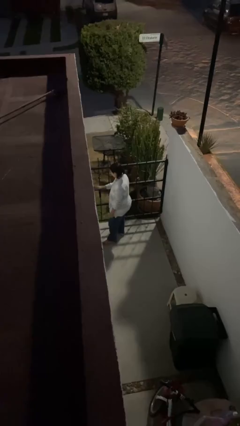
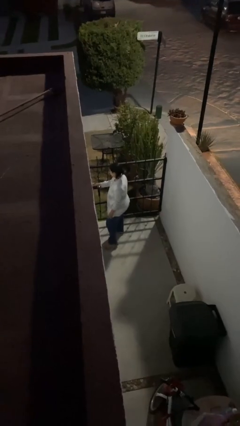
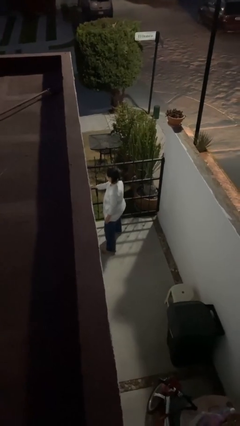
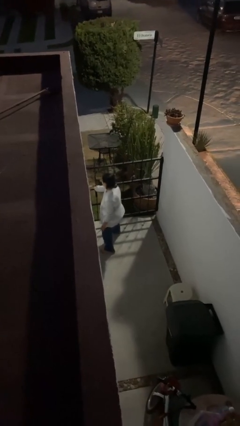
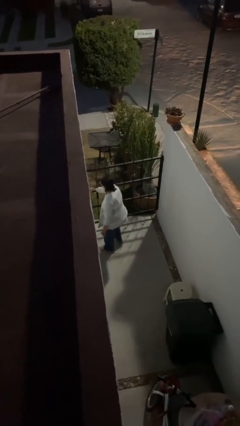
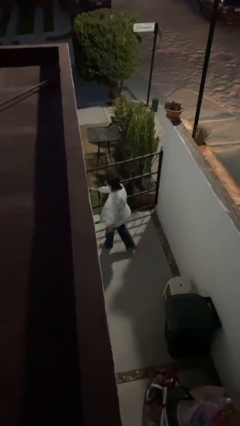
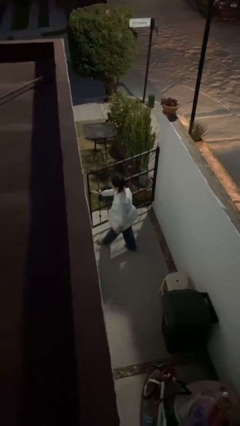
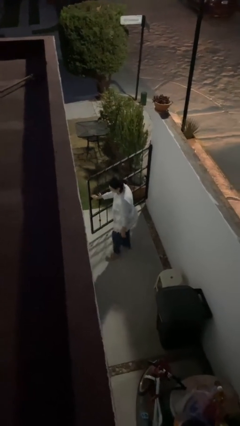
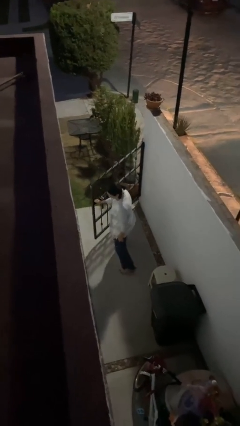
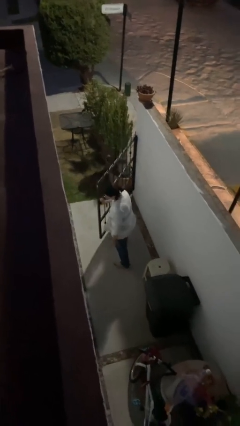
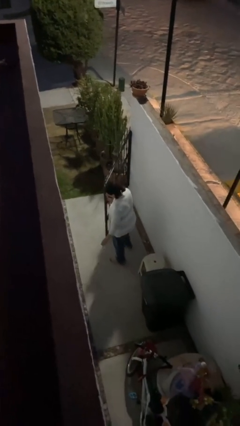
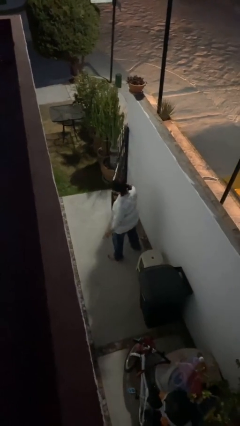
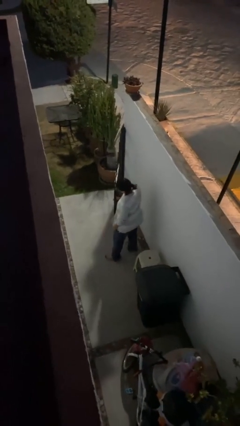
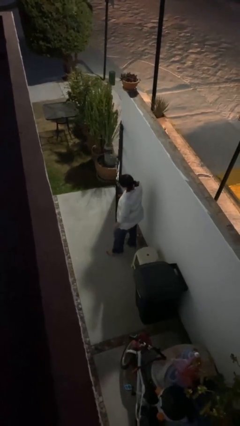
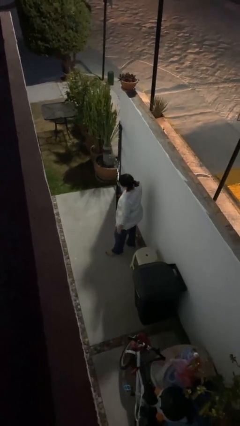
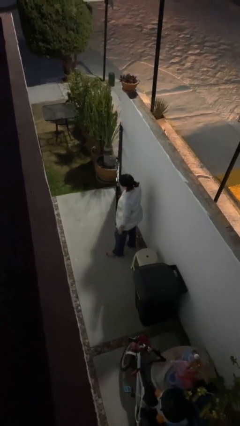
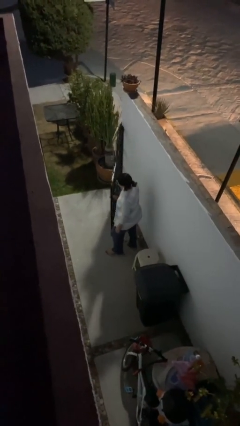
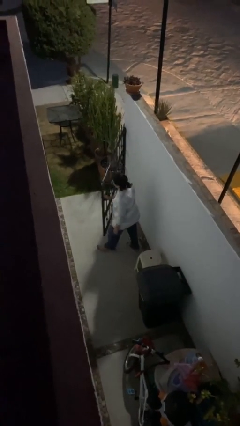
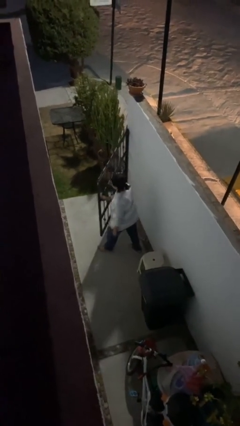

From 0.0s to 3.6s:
person opens facility door

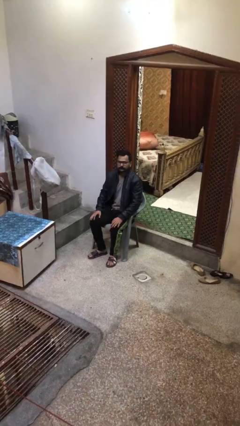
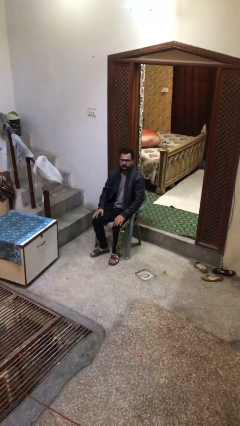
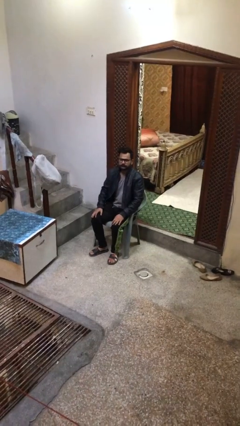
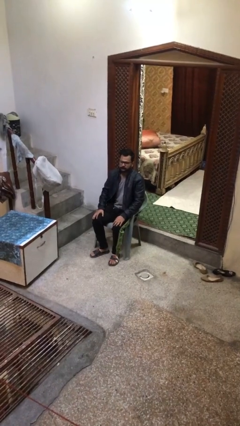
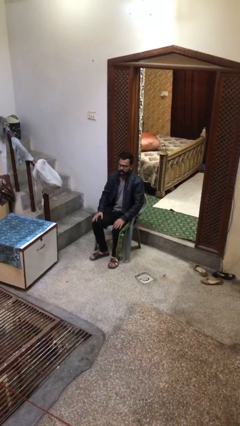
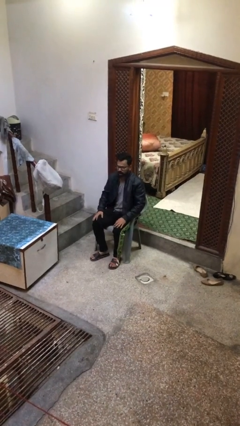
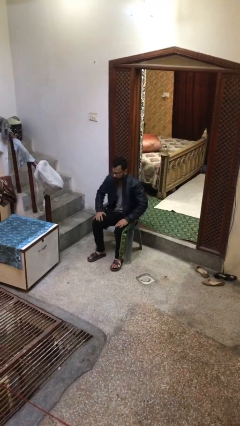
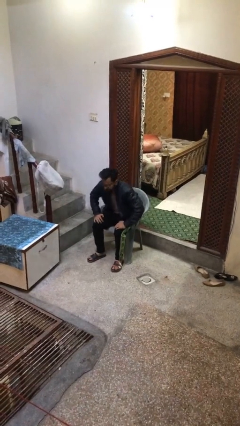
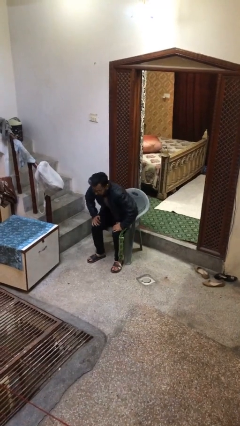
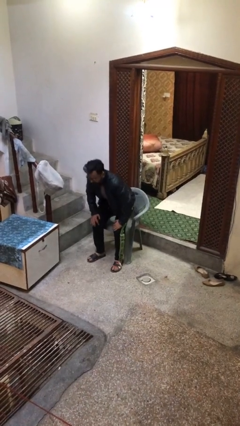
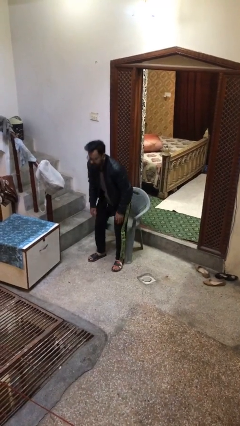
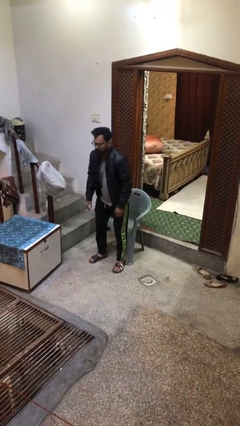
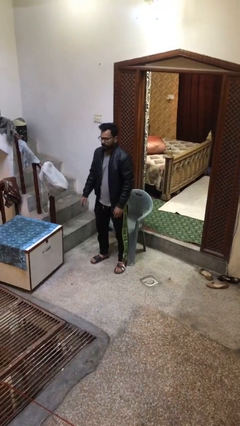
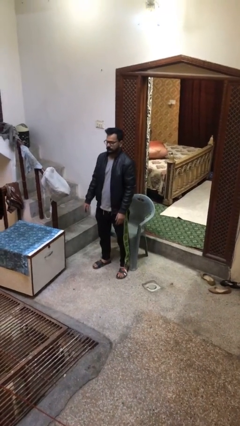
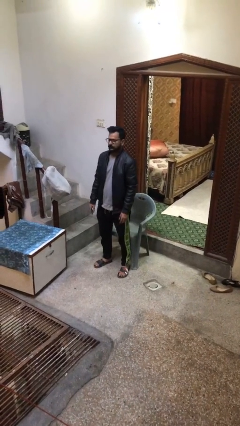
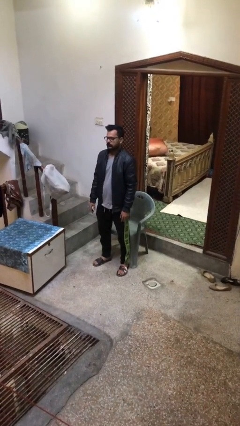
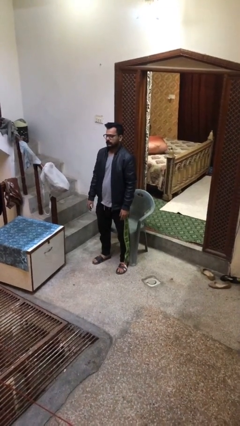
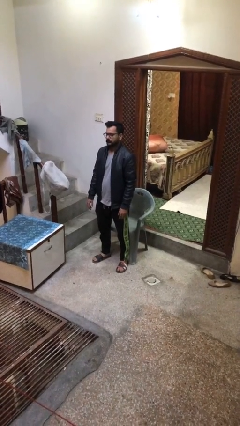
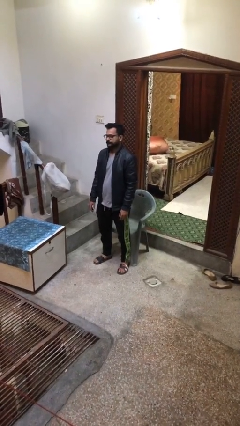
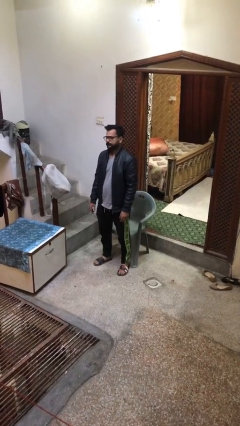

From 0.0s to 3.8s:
person stands up

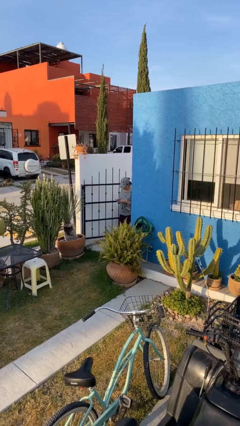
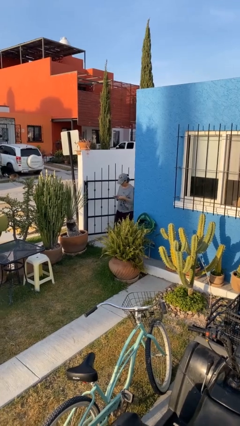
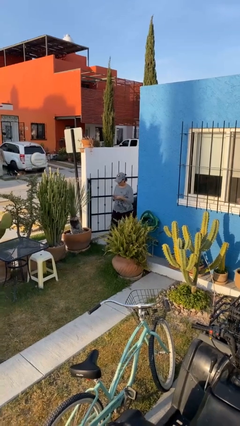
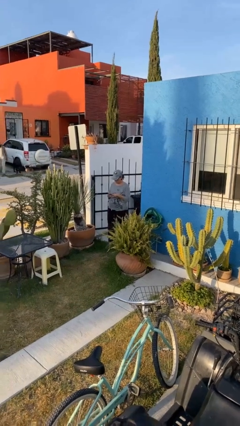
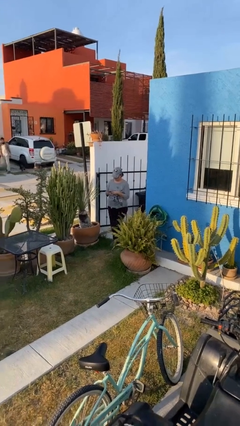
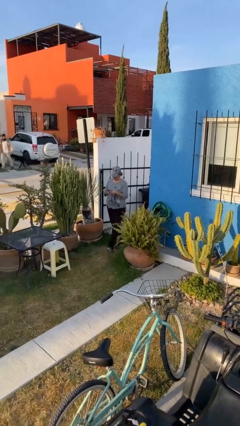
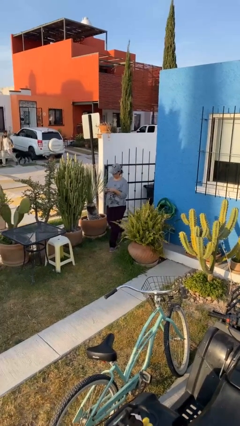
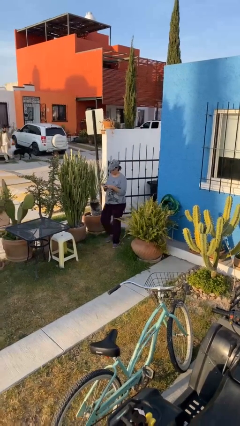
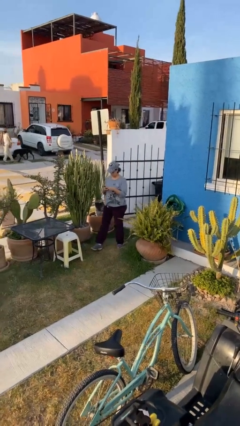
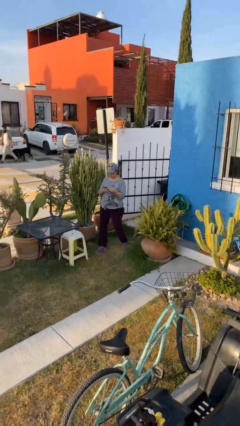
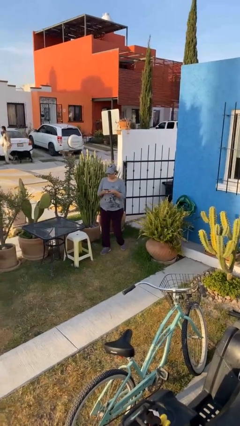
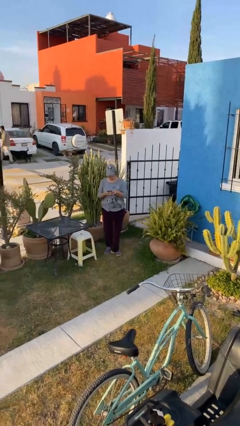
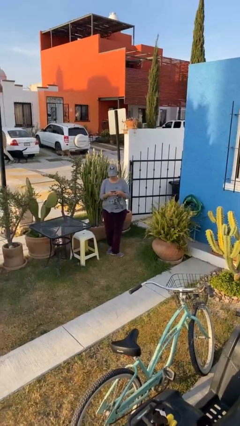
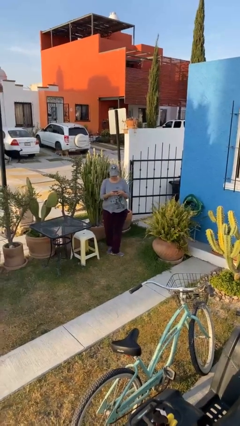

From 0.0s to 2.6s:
person enters scene through structure

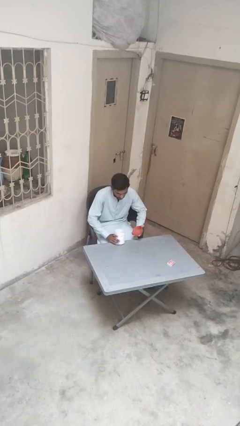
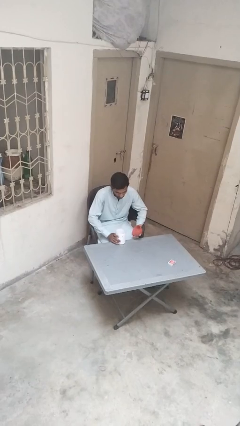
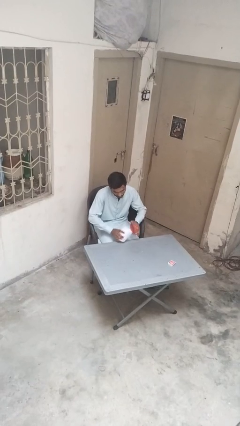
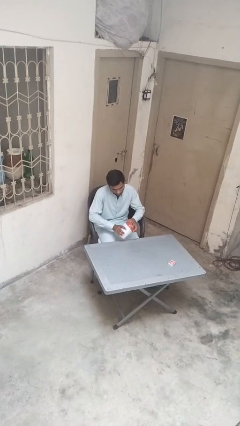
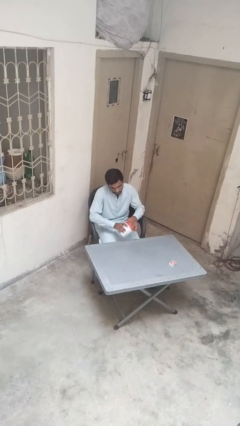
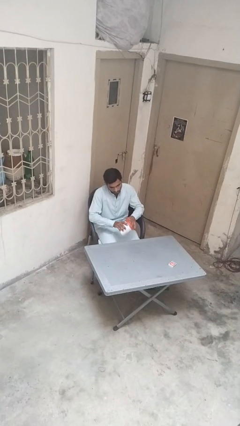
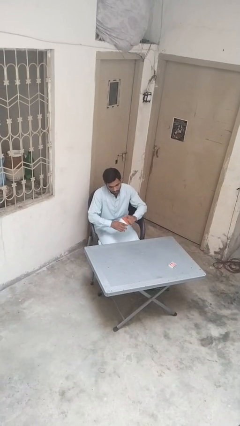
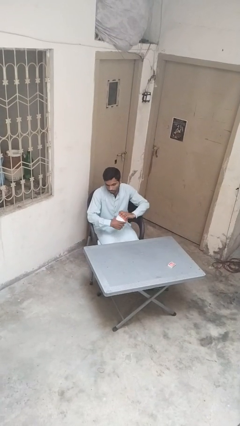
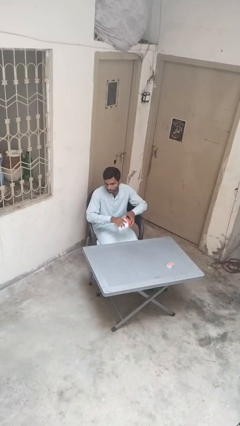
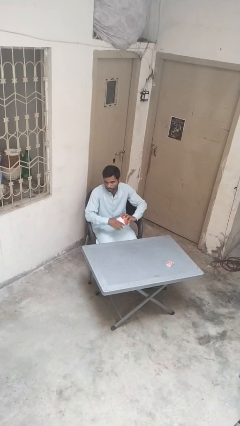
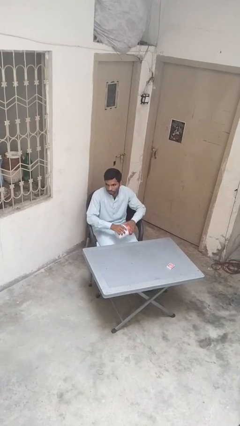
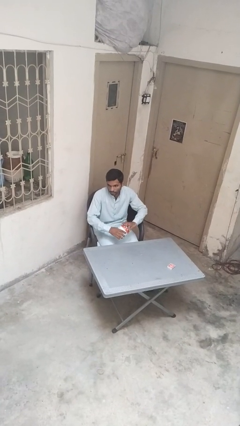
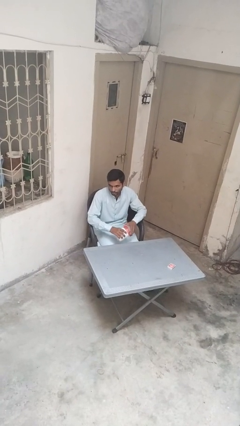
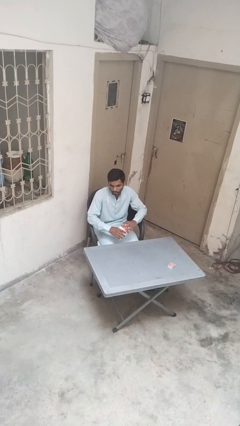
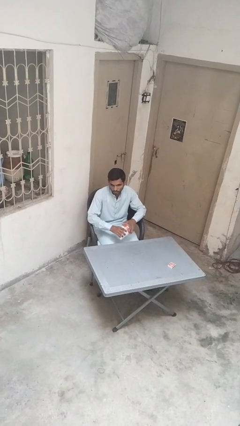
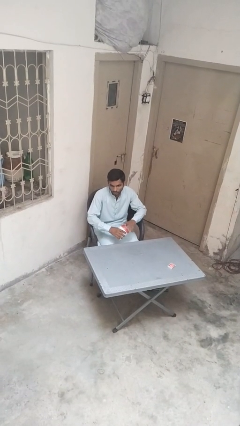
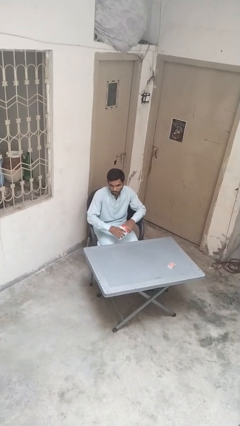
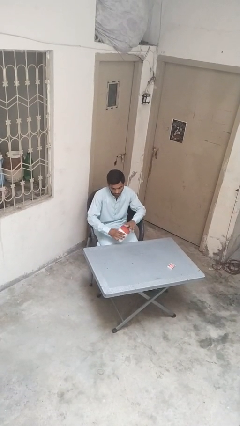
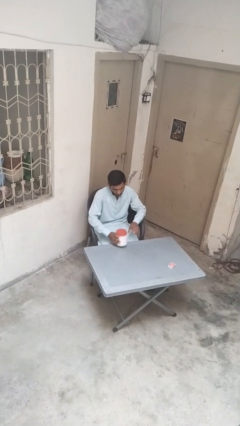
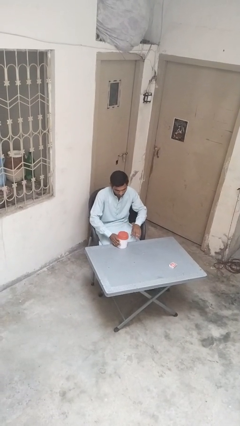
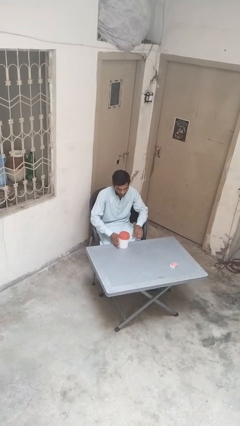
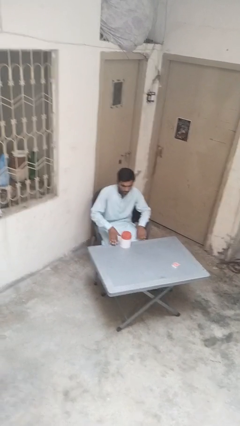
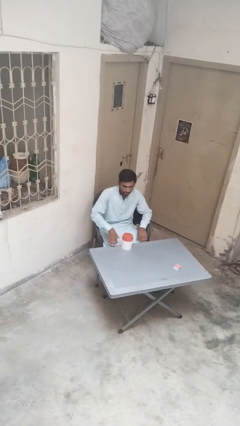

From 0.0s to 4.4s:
person closes jar

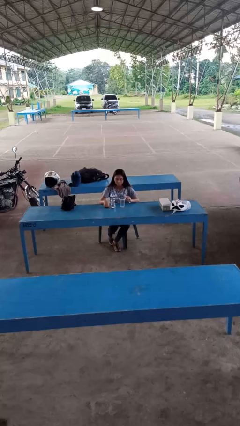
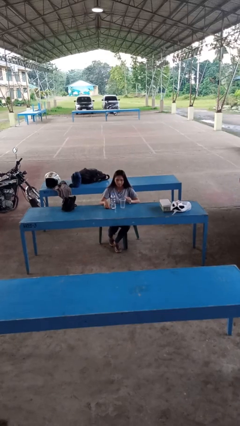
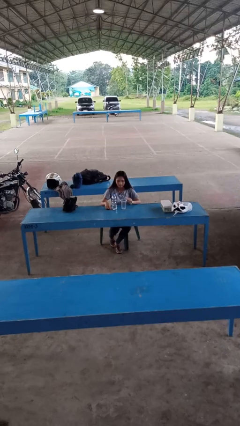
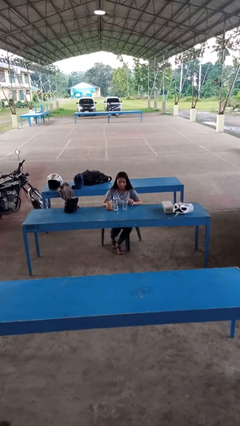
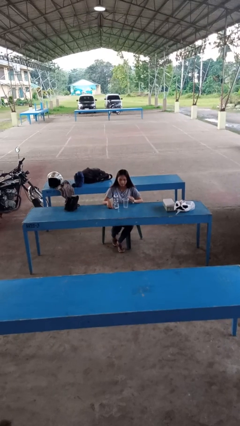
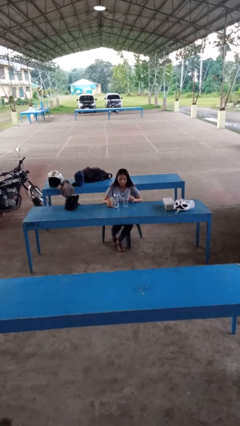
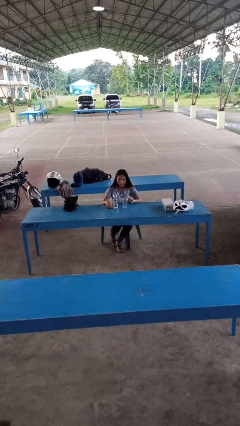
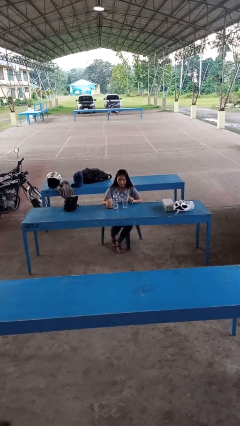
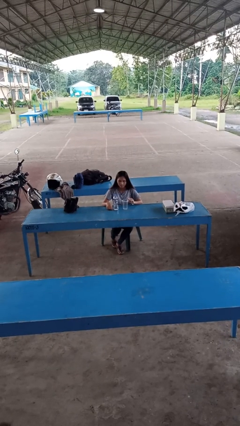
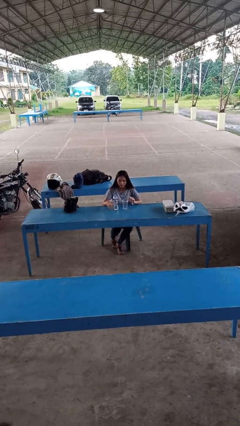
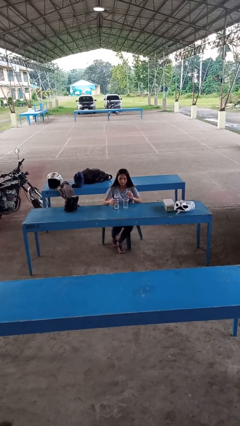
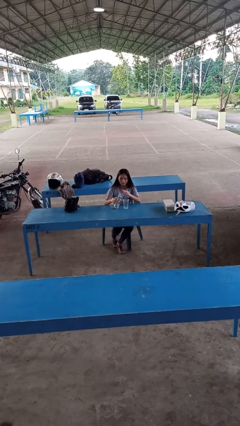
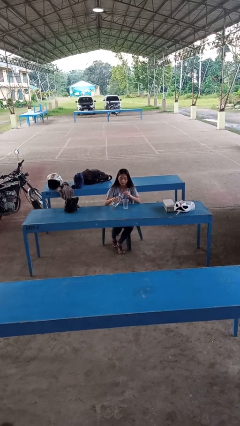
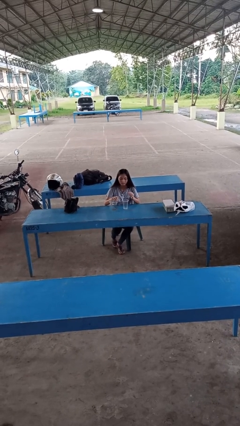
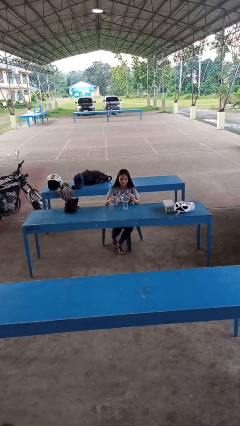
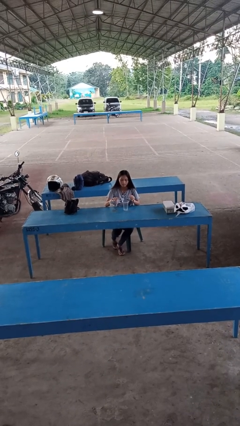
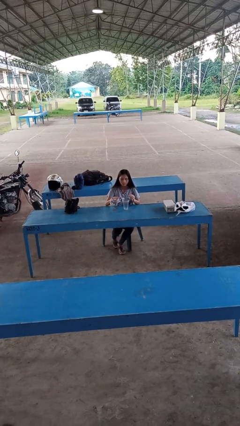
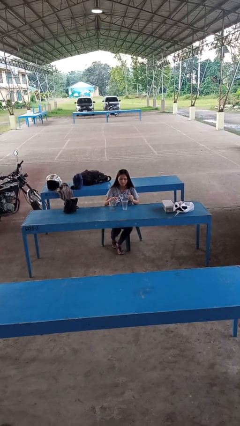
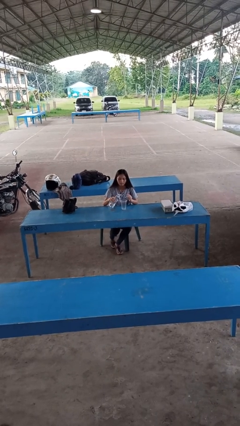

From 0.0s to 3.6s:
person pours liquid into cup
